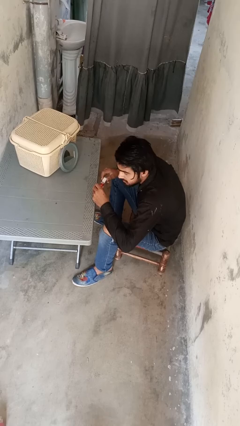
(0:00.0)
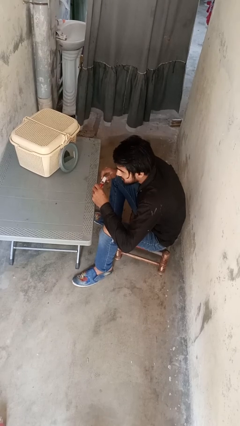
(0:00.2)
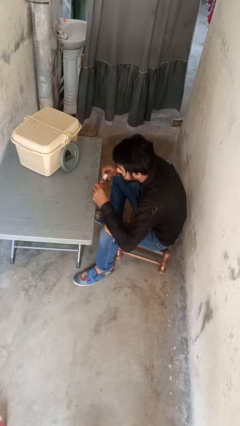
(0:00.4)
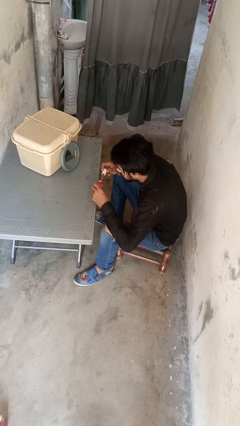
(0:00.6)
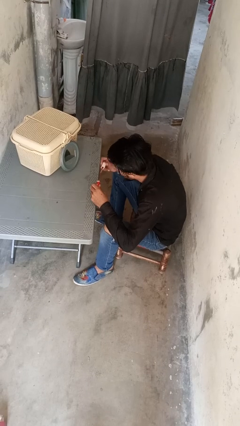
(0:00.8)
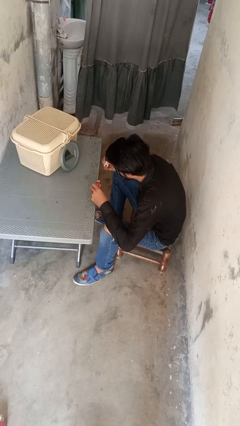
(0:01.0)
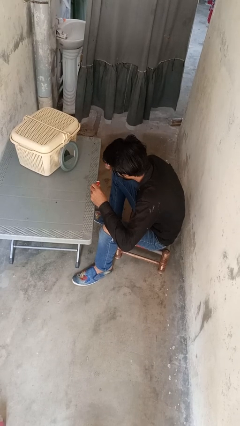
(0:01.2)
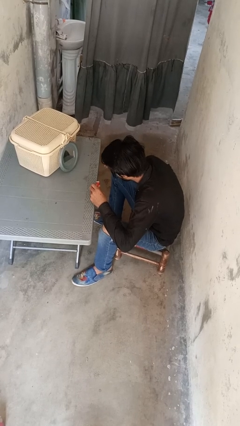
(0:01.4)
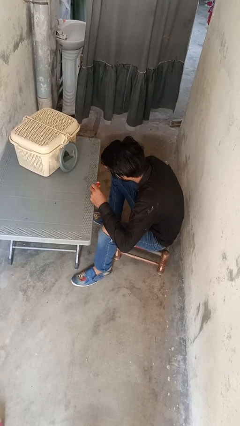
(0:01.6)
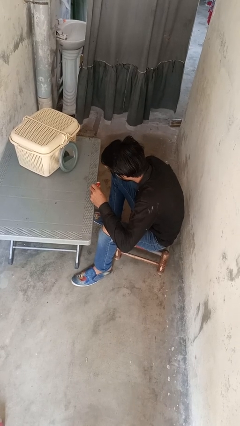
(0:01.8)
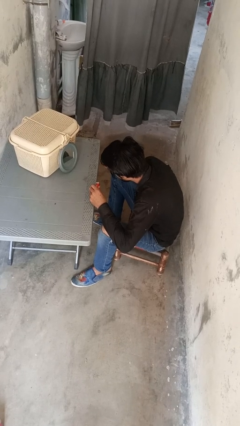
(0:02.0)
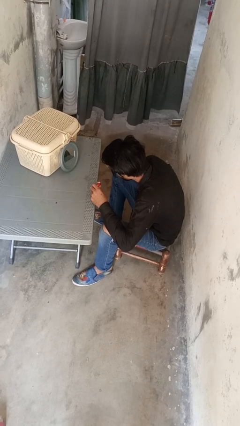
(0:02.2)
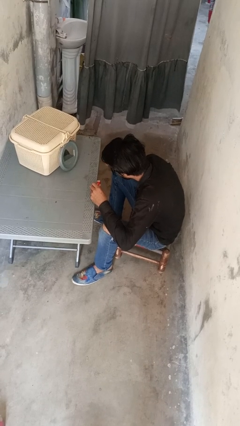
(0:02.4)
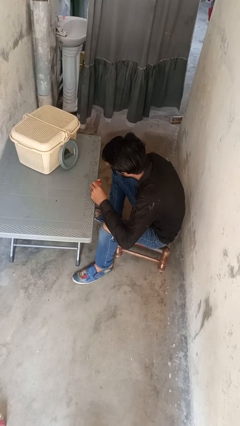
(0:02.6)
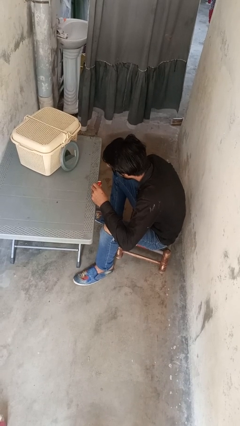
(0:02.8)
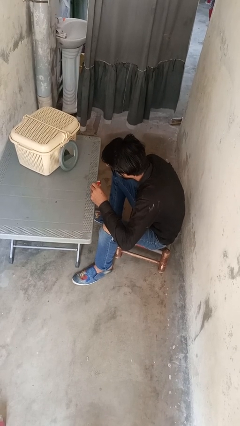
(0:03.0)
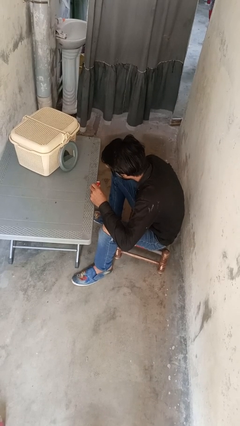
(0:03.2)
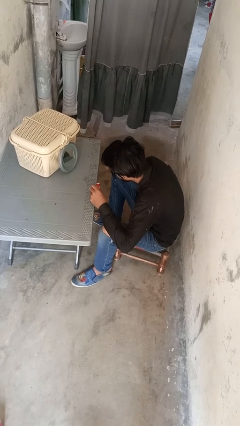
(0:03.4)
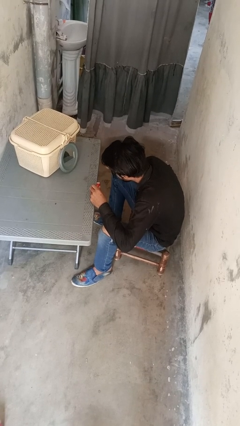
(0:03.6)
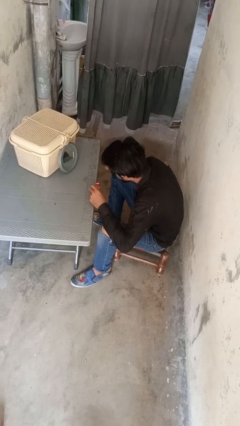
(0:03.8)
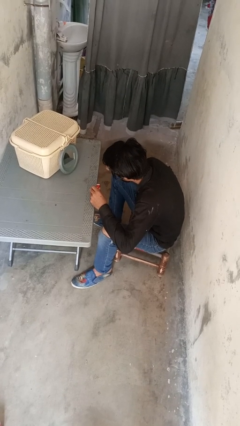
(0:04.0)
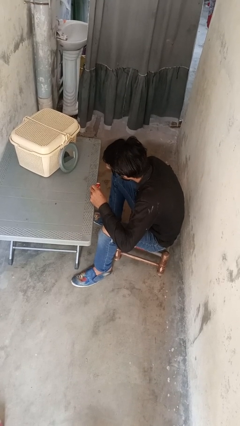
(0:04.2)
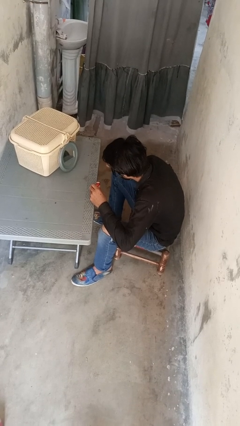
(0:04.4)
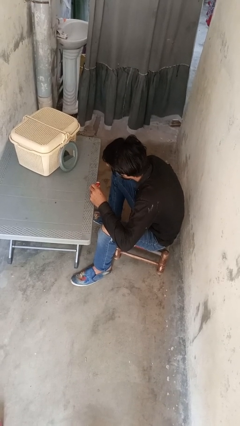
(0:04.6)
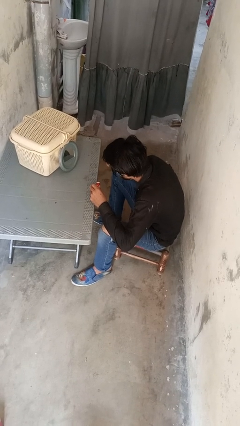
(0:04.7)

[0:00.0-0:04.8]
person applies eye makeup

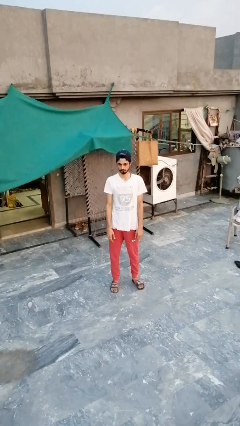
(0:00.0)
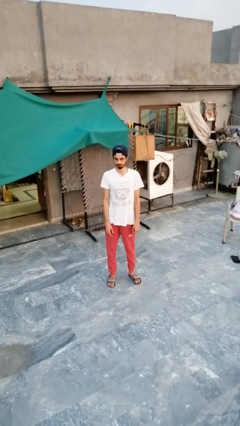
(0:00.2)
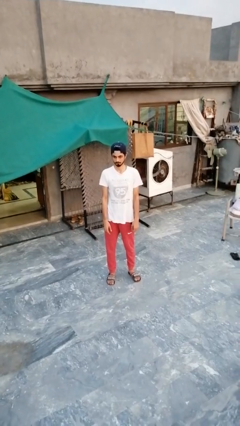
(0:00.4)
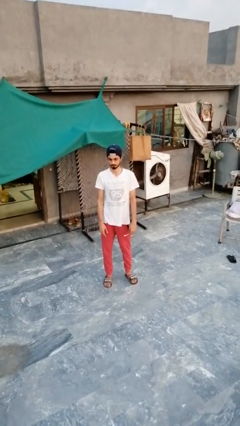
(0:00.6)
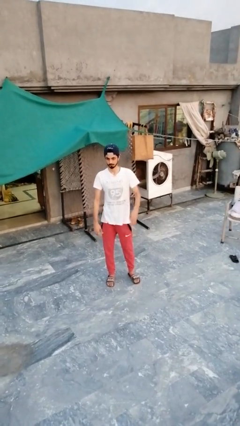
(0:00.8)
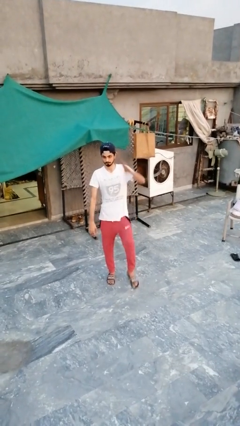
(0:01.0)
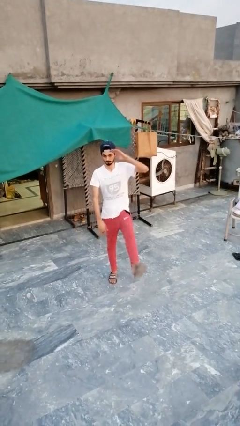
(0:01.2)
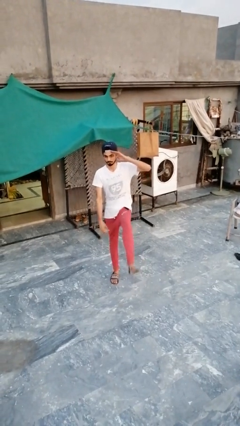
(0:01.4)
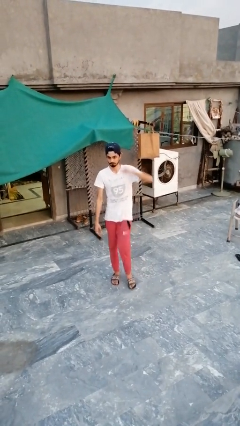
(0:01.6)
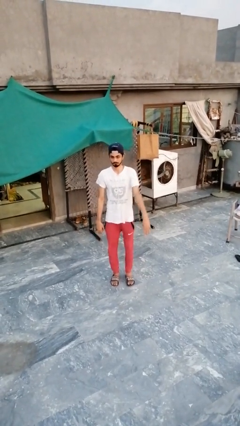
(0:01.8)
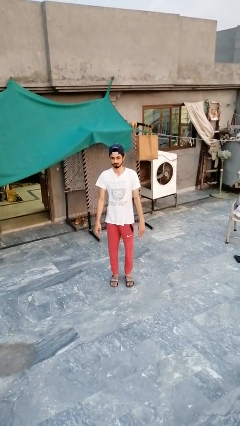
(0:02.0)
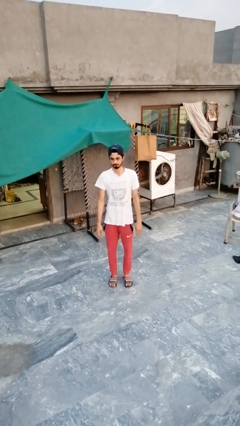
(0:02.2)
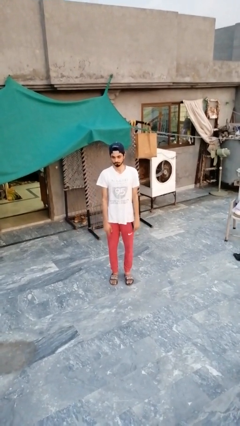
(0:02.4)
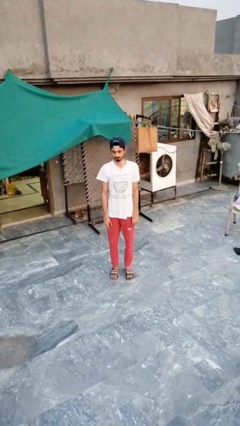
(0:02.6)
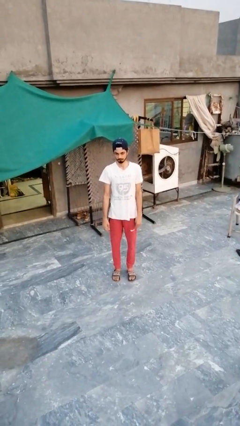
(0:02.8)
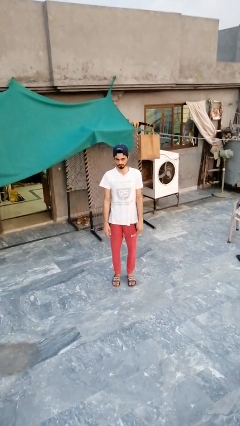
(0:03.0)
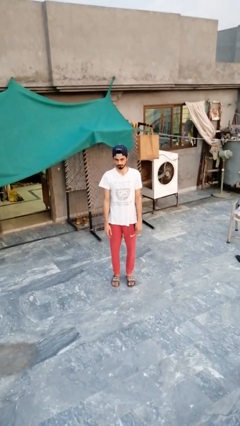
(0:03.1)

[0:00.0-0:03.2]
person salutes

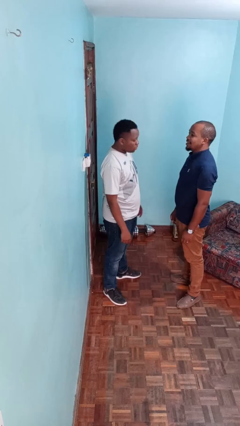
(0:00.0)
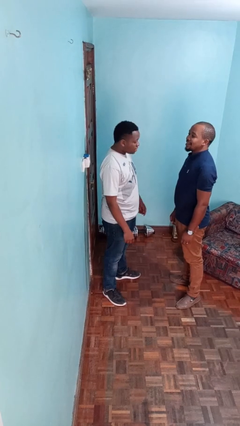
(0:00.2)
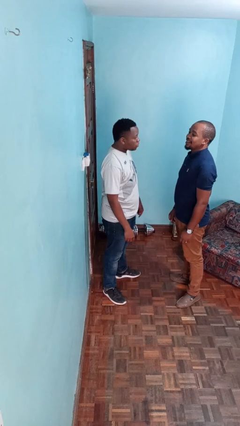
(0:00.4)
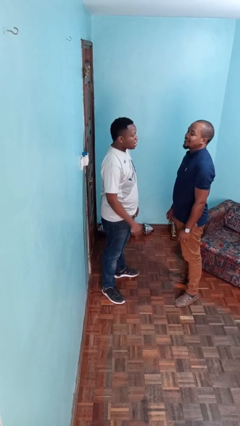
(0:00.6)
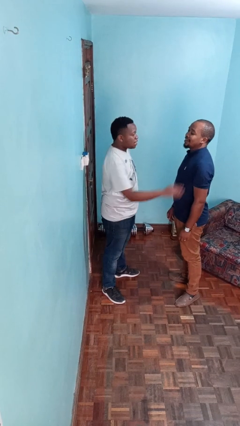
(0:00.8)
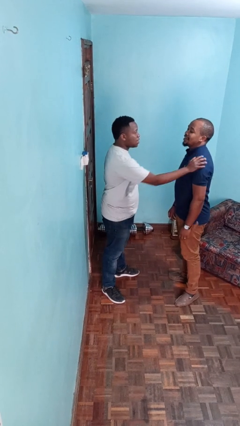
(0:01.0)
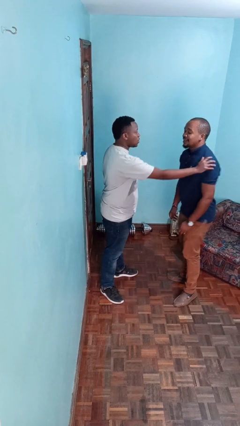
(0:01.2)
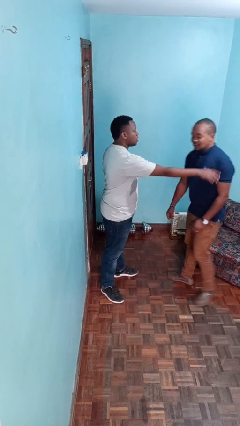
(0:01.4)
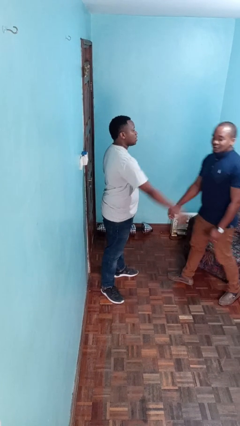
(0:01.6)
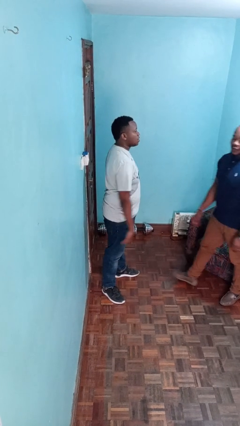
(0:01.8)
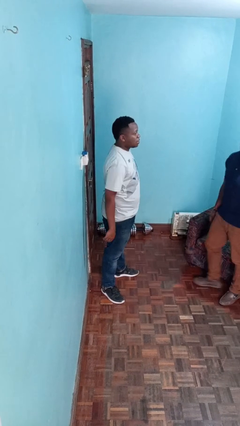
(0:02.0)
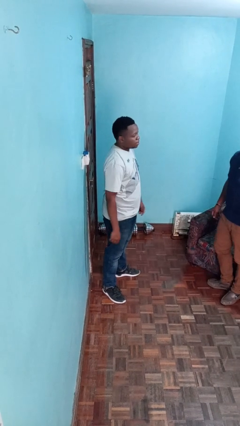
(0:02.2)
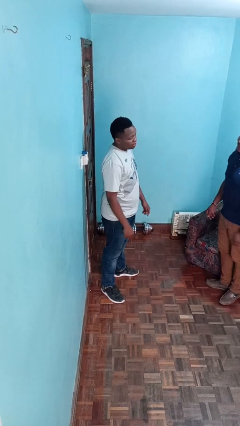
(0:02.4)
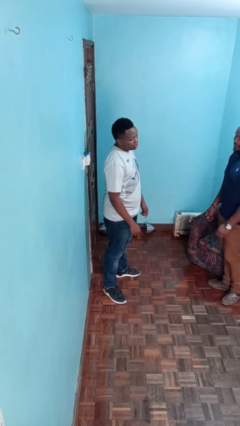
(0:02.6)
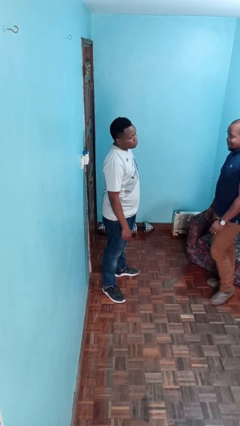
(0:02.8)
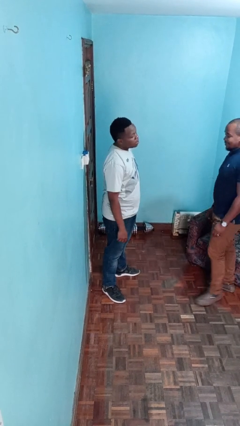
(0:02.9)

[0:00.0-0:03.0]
person shoves person

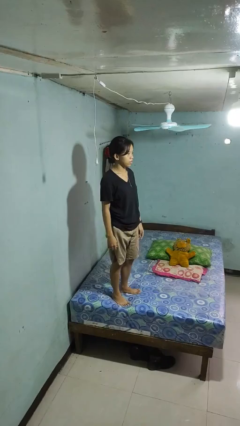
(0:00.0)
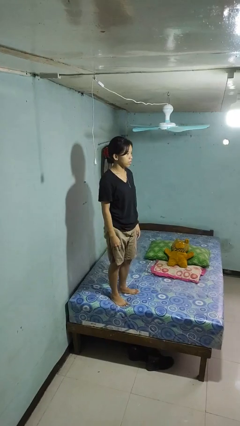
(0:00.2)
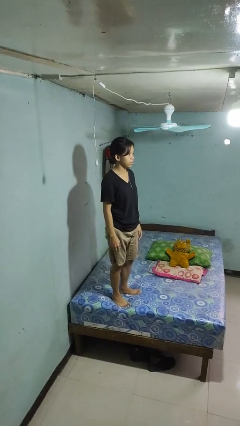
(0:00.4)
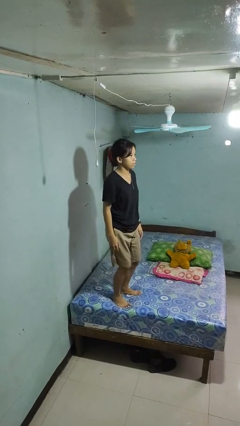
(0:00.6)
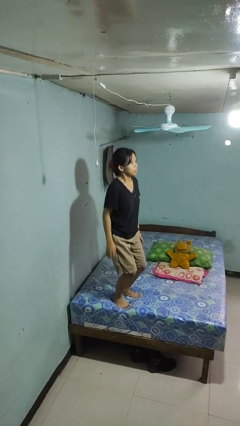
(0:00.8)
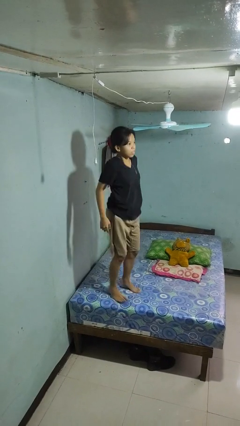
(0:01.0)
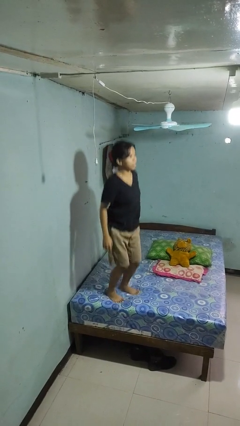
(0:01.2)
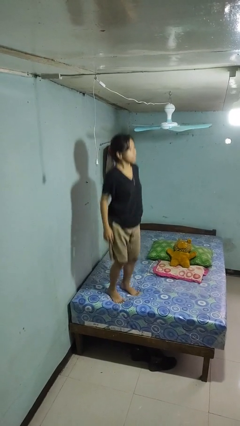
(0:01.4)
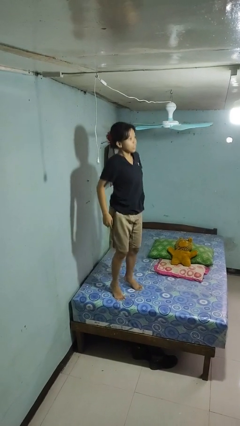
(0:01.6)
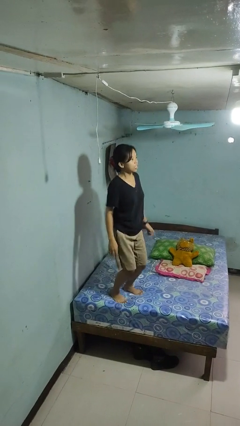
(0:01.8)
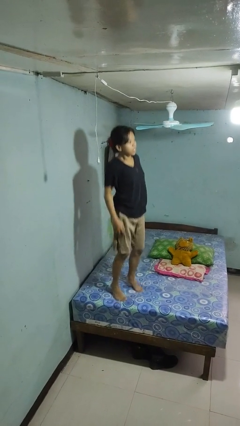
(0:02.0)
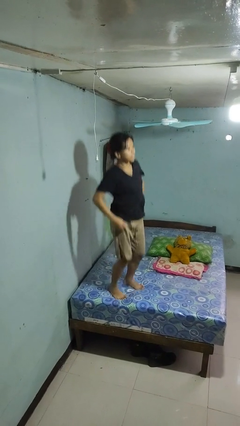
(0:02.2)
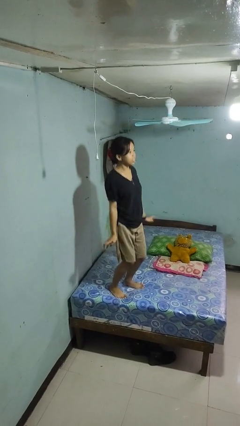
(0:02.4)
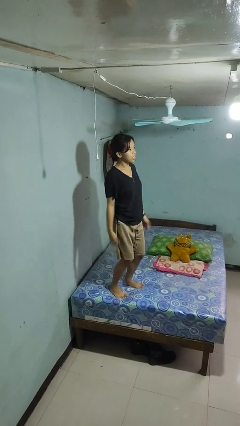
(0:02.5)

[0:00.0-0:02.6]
person jumps on bed

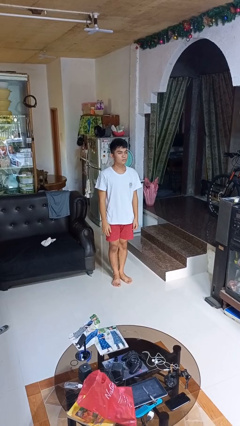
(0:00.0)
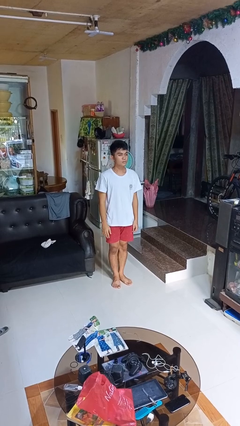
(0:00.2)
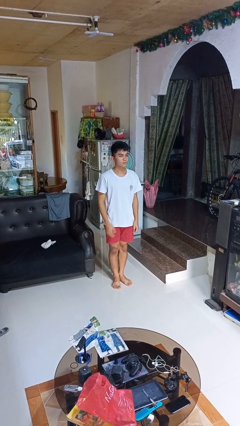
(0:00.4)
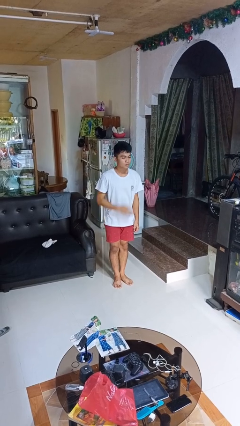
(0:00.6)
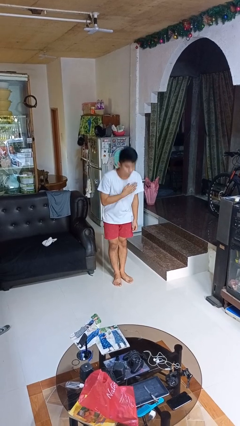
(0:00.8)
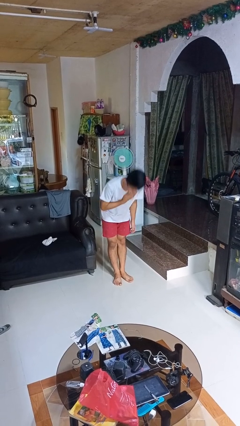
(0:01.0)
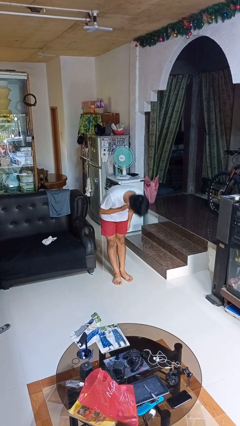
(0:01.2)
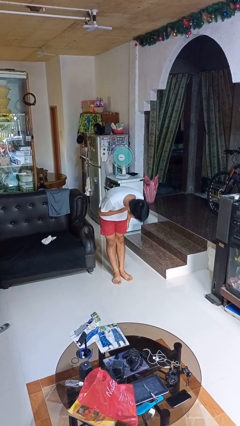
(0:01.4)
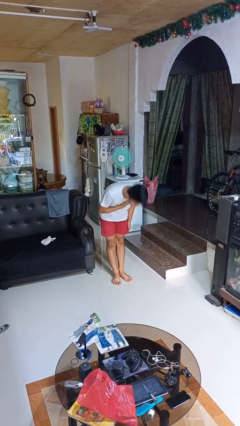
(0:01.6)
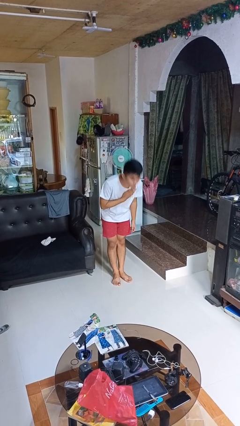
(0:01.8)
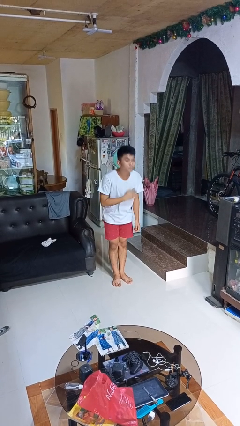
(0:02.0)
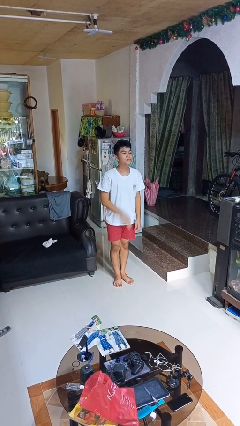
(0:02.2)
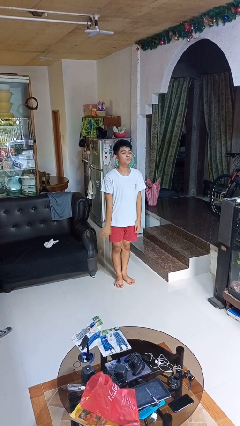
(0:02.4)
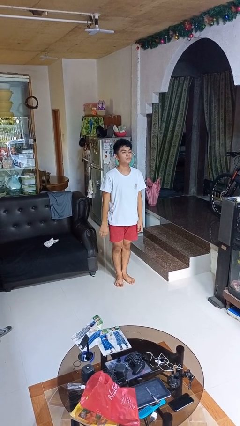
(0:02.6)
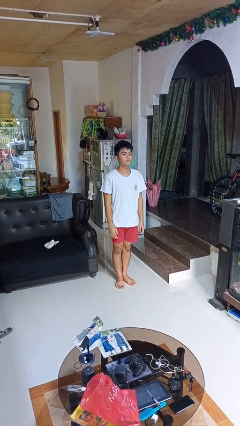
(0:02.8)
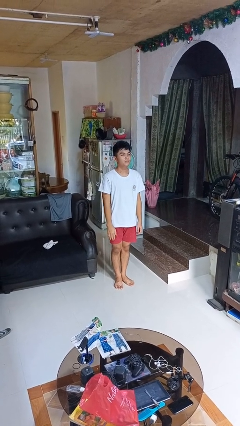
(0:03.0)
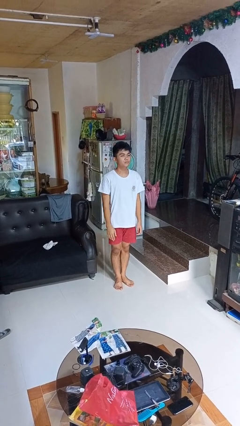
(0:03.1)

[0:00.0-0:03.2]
person bows

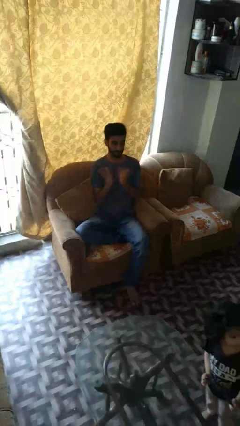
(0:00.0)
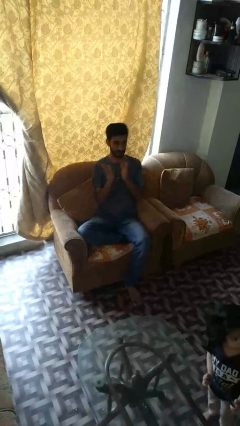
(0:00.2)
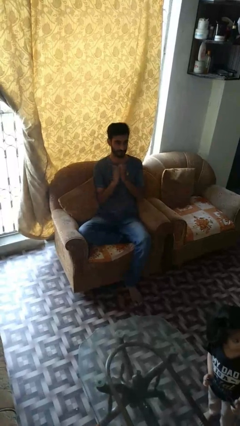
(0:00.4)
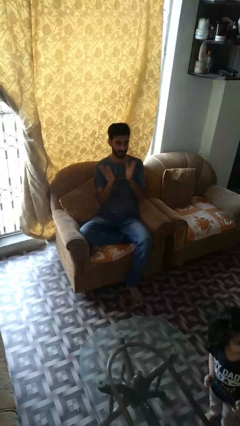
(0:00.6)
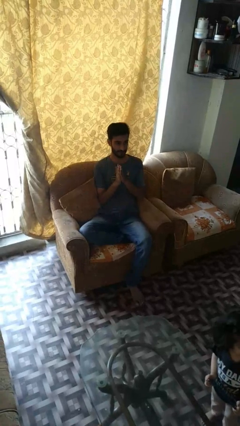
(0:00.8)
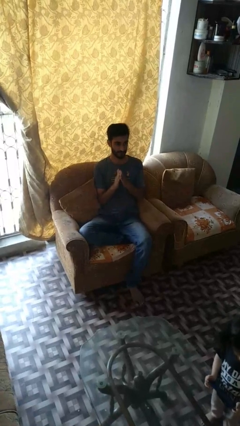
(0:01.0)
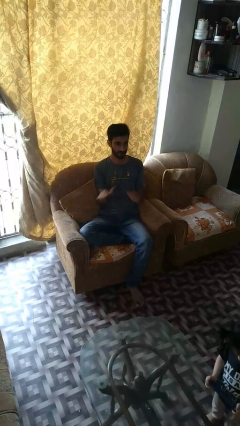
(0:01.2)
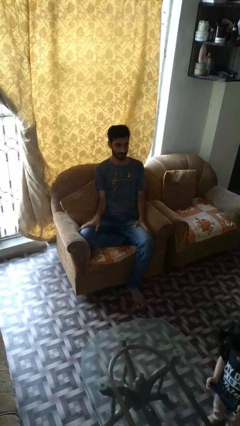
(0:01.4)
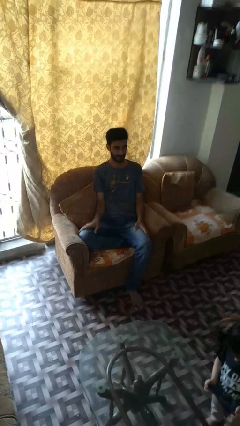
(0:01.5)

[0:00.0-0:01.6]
person claps hands
